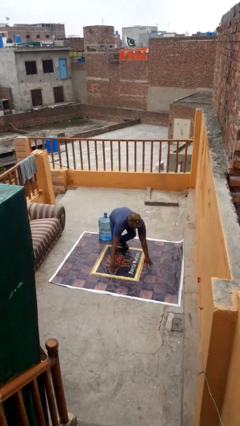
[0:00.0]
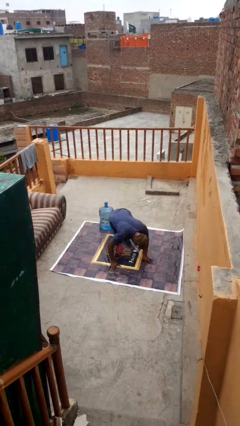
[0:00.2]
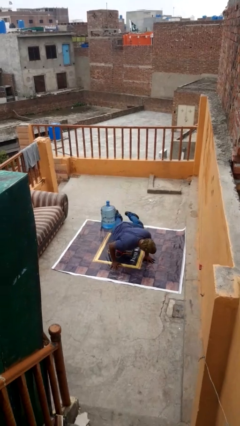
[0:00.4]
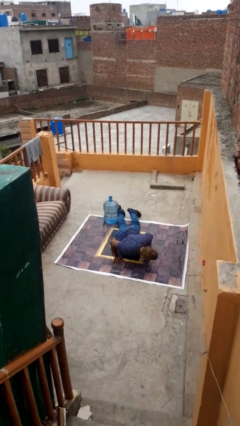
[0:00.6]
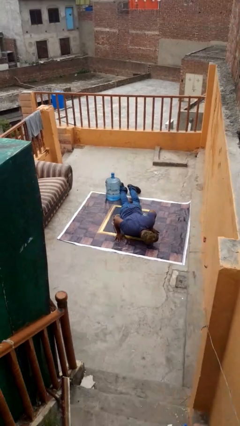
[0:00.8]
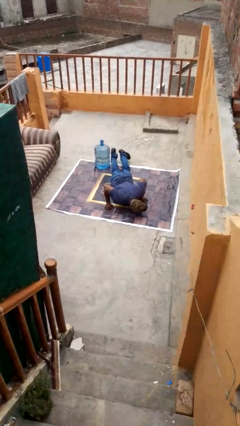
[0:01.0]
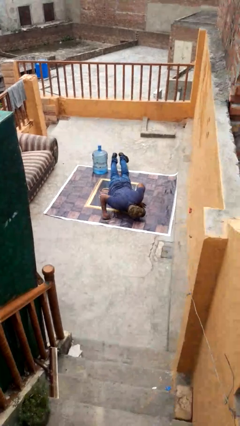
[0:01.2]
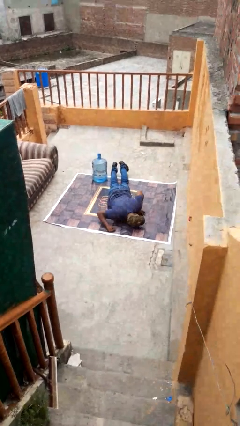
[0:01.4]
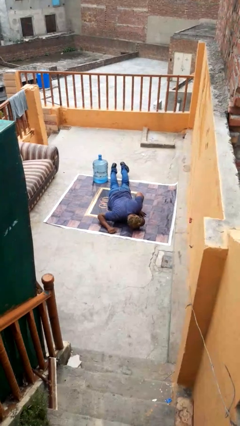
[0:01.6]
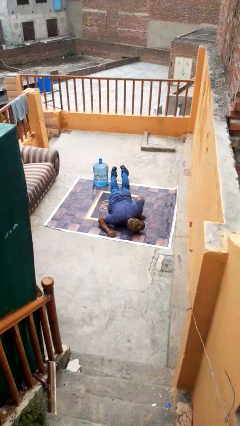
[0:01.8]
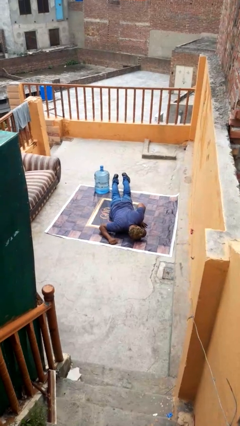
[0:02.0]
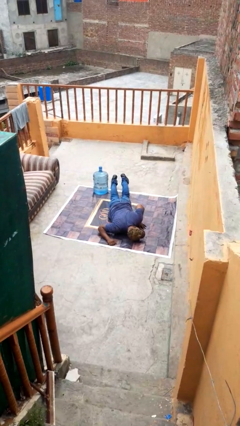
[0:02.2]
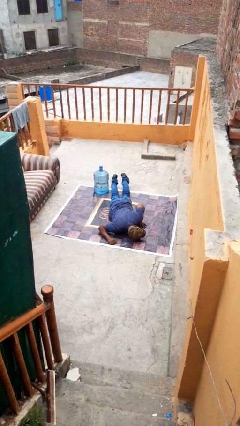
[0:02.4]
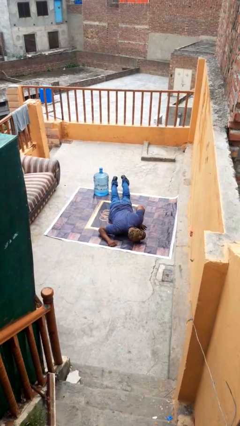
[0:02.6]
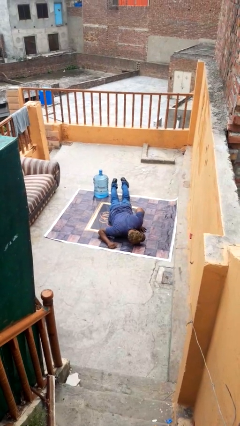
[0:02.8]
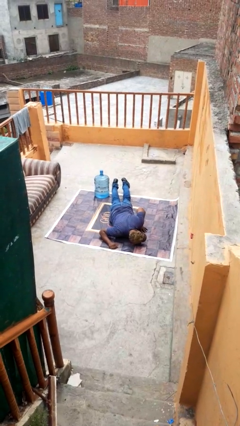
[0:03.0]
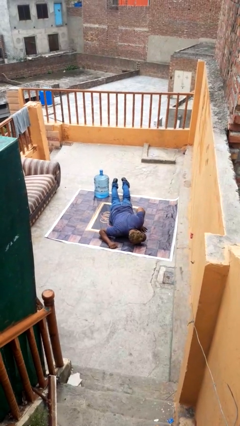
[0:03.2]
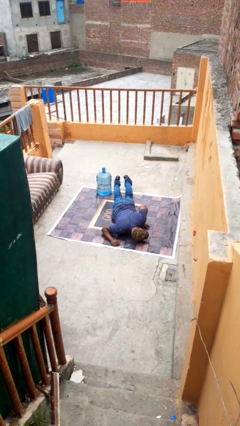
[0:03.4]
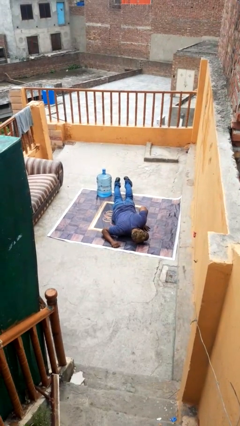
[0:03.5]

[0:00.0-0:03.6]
person lies down on floor

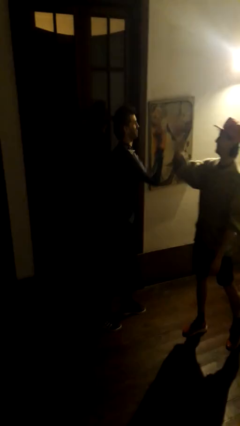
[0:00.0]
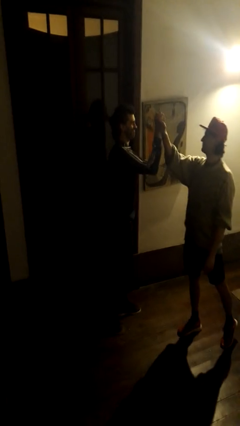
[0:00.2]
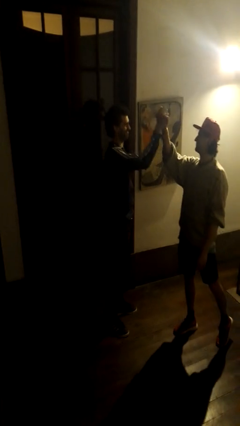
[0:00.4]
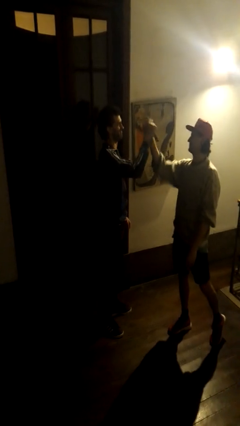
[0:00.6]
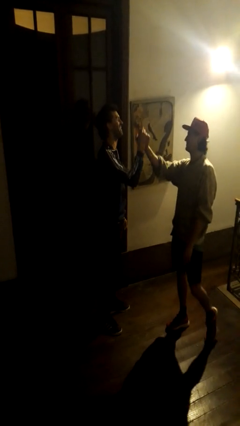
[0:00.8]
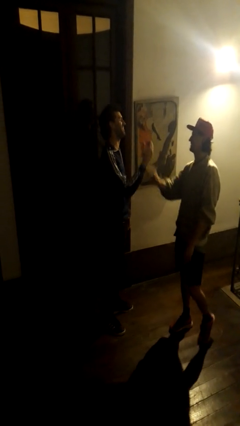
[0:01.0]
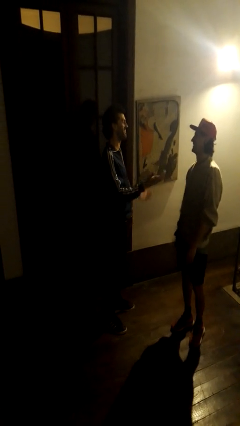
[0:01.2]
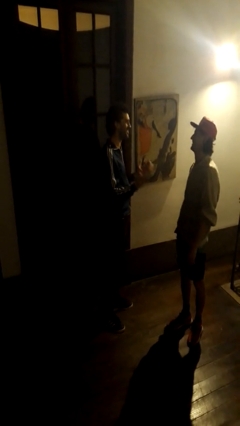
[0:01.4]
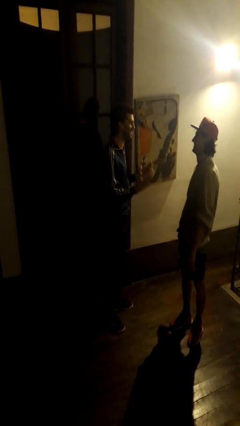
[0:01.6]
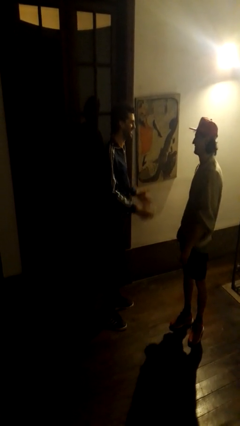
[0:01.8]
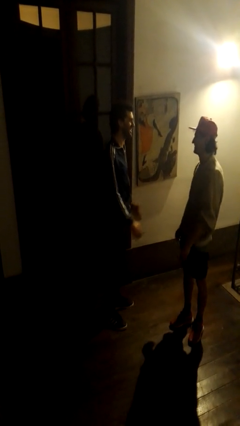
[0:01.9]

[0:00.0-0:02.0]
person highfives hand

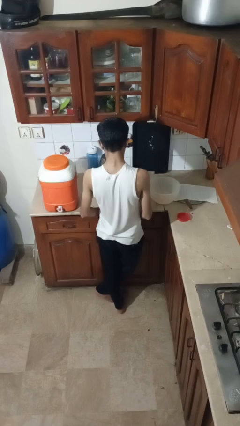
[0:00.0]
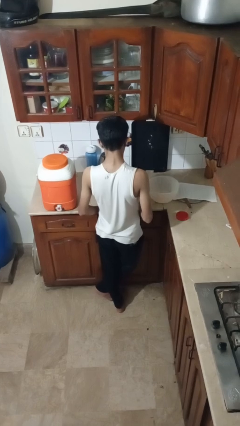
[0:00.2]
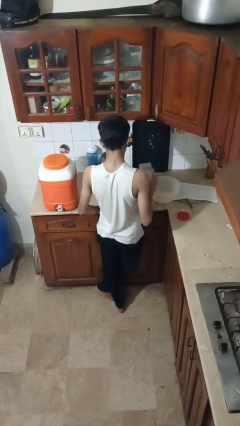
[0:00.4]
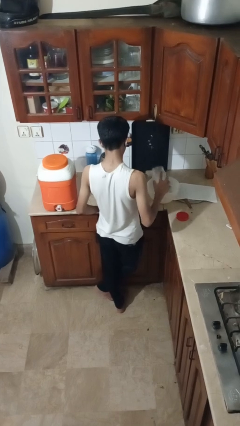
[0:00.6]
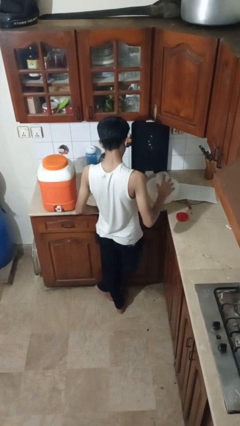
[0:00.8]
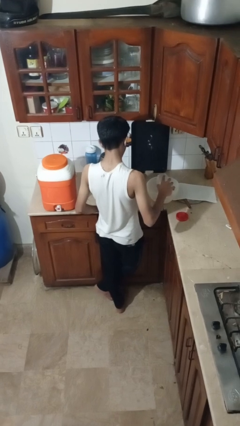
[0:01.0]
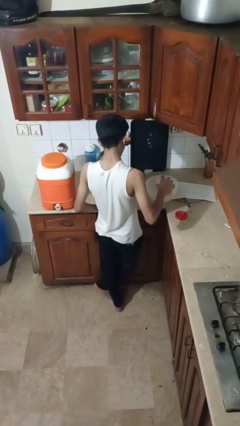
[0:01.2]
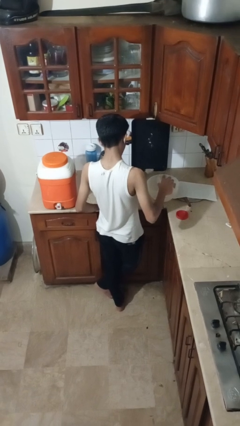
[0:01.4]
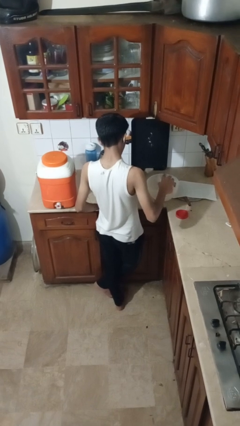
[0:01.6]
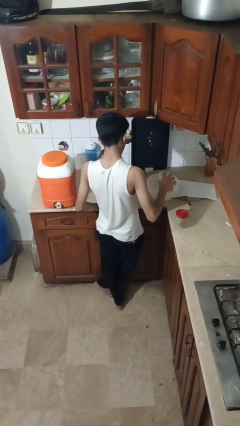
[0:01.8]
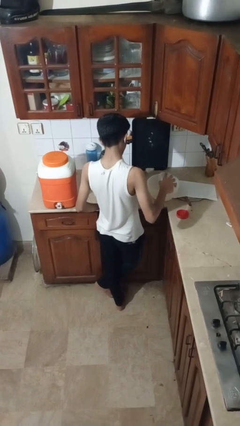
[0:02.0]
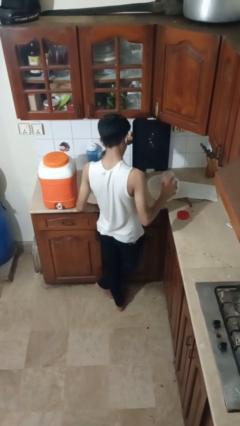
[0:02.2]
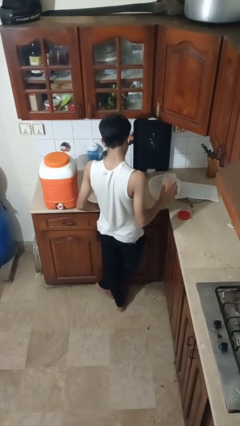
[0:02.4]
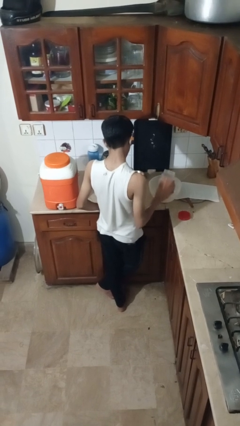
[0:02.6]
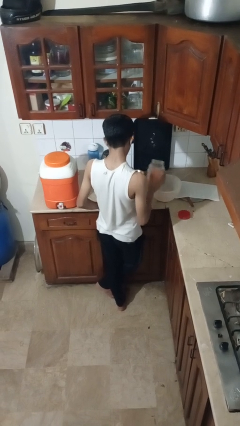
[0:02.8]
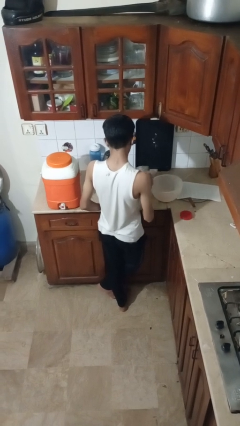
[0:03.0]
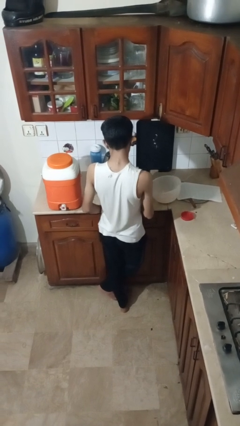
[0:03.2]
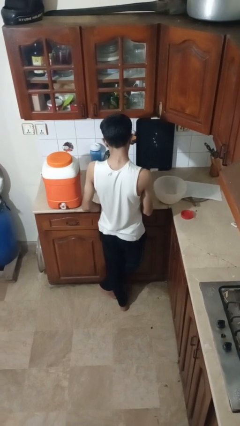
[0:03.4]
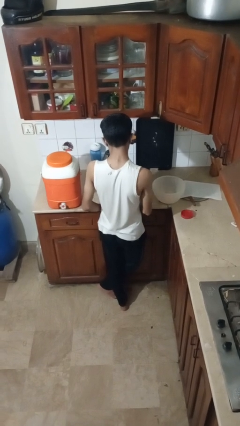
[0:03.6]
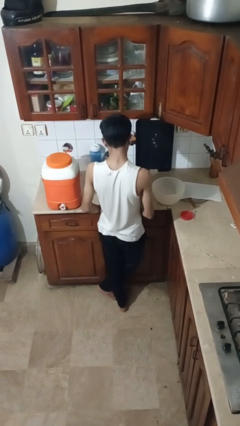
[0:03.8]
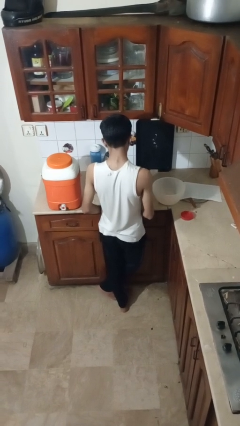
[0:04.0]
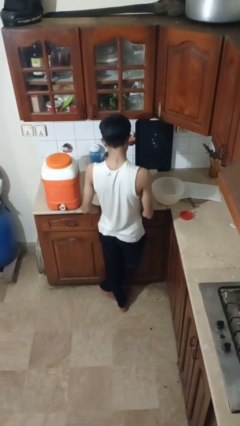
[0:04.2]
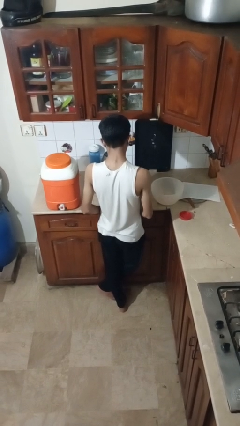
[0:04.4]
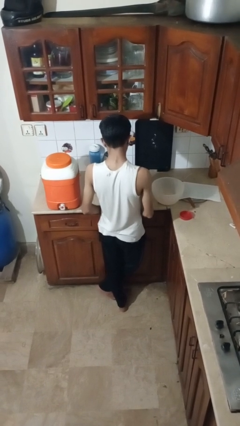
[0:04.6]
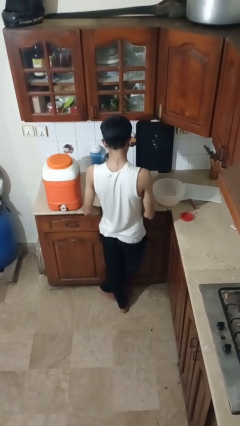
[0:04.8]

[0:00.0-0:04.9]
person pours into bowl

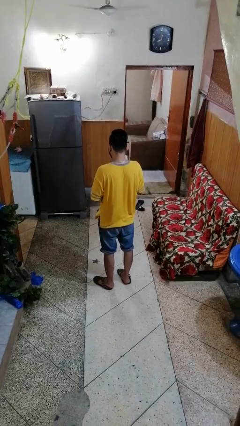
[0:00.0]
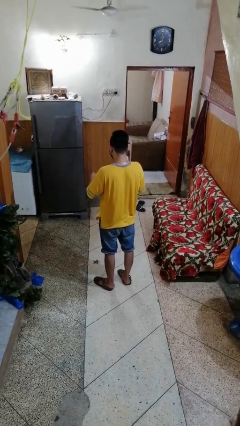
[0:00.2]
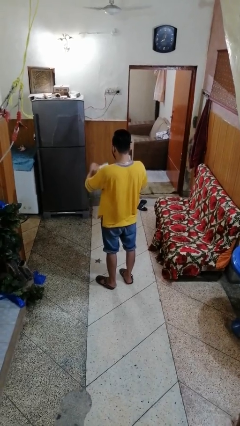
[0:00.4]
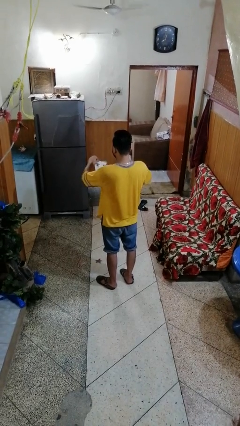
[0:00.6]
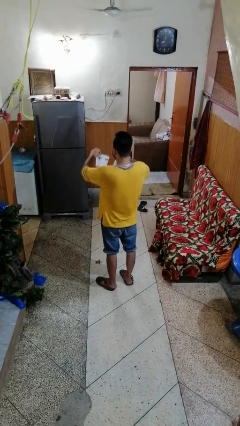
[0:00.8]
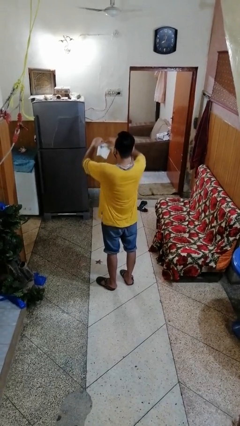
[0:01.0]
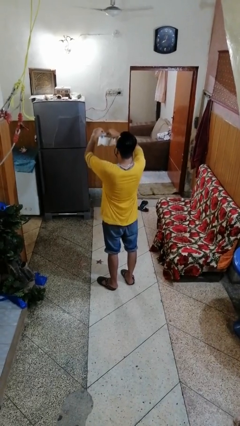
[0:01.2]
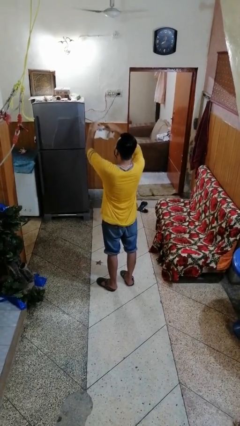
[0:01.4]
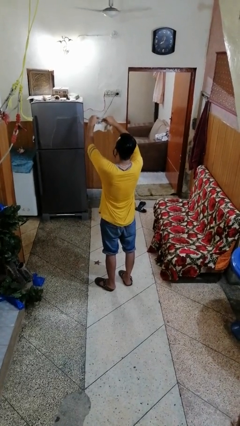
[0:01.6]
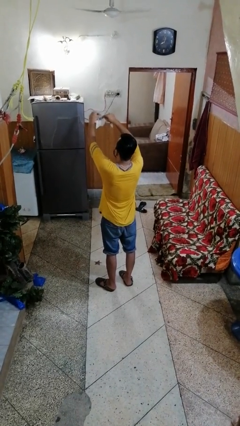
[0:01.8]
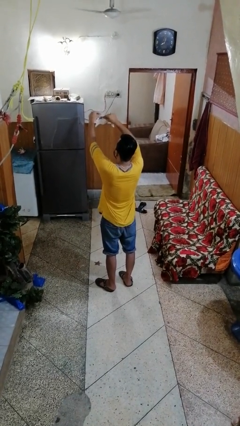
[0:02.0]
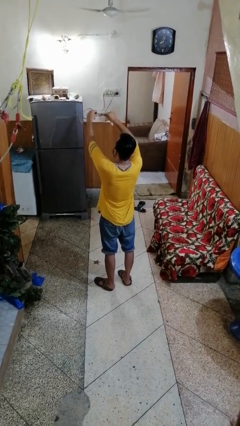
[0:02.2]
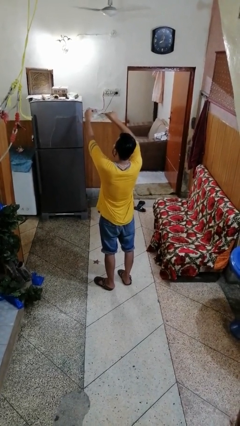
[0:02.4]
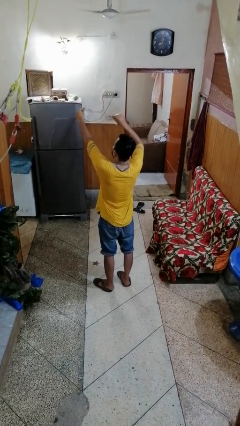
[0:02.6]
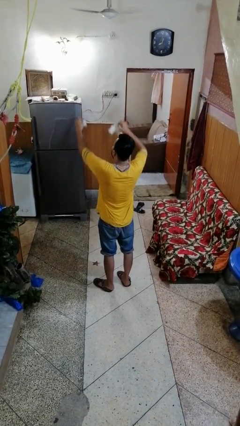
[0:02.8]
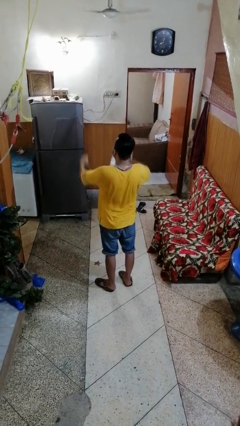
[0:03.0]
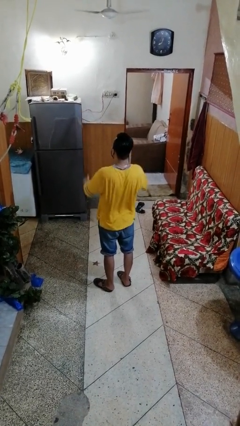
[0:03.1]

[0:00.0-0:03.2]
person tears paper

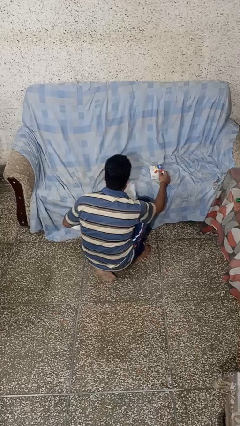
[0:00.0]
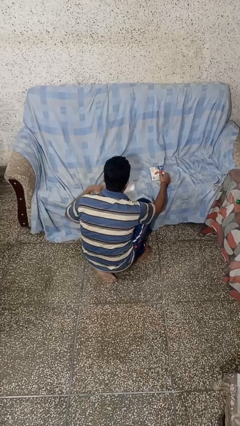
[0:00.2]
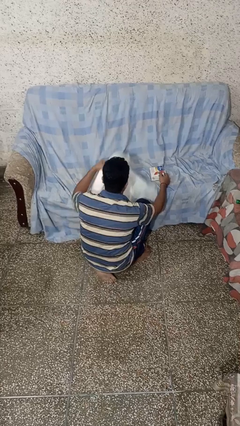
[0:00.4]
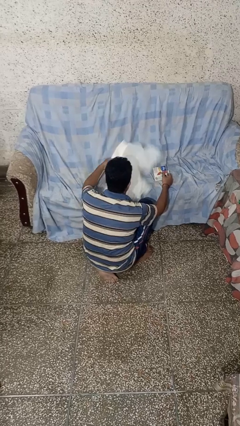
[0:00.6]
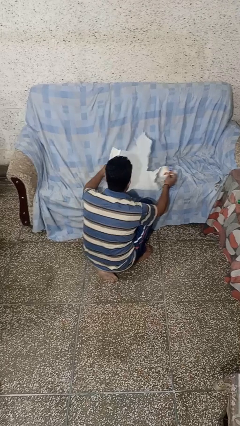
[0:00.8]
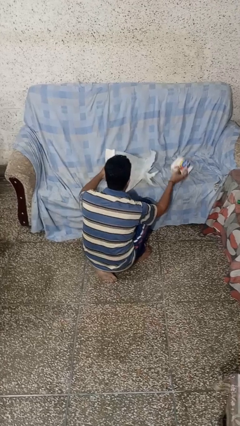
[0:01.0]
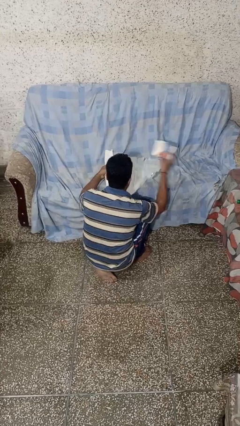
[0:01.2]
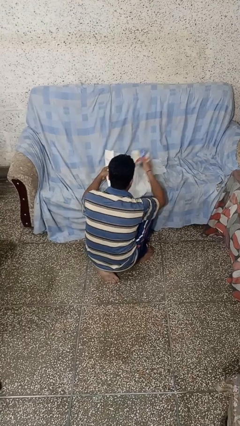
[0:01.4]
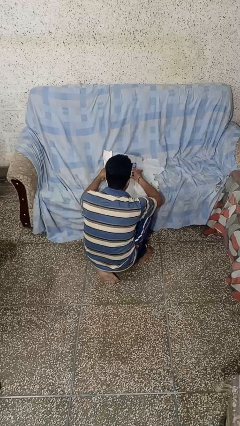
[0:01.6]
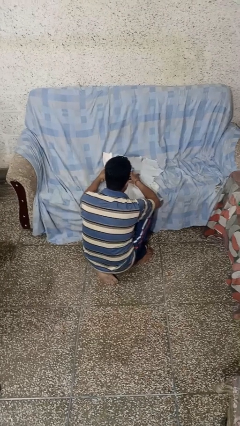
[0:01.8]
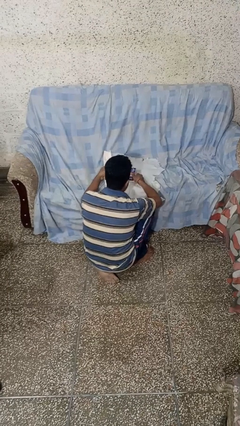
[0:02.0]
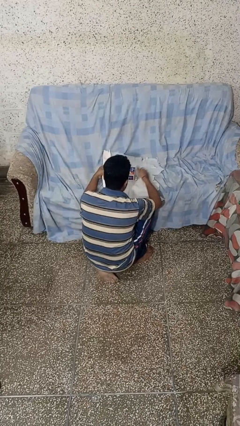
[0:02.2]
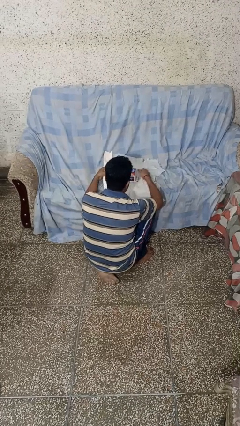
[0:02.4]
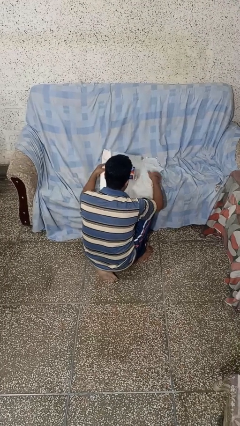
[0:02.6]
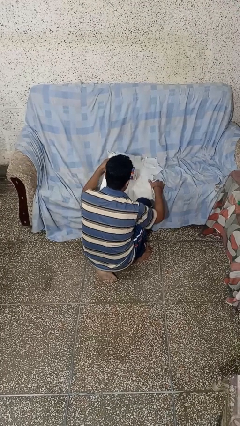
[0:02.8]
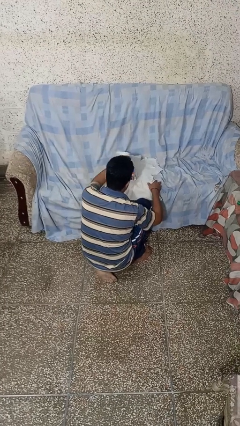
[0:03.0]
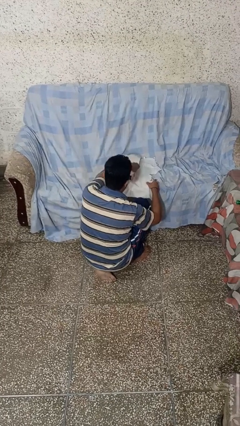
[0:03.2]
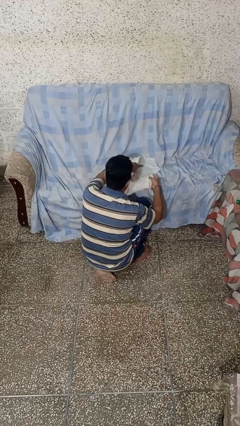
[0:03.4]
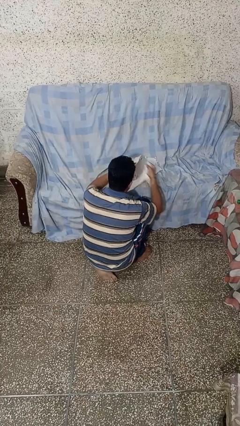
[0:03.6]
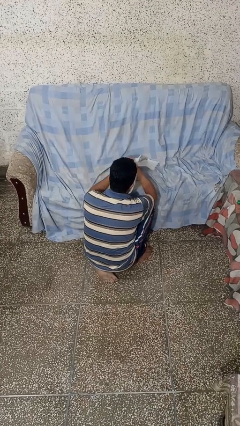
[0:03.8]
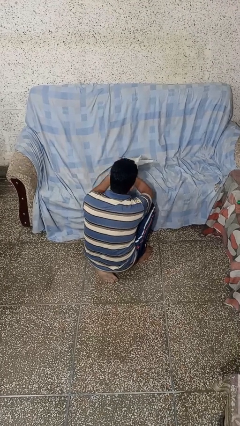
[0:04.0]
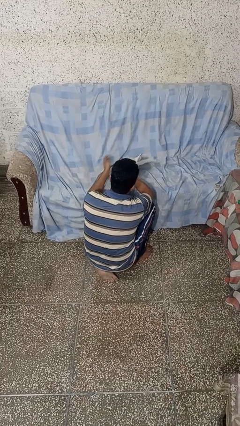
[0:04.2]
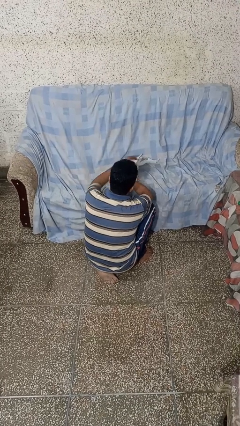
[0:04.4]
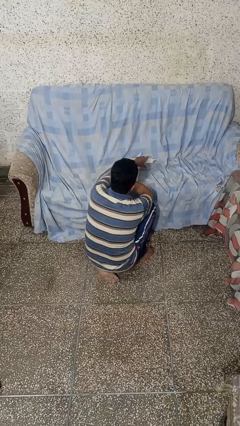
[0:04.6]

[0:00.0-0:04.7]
person wraps box
